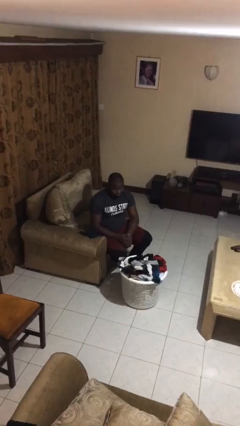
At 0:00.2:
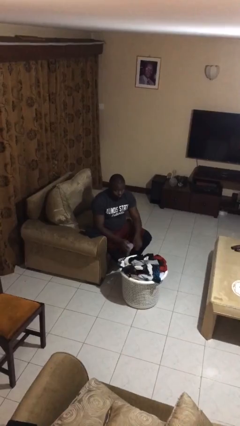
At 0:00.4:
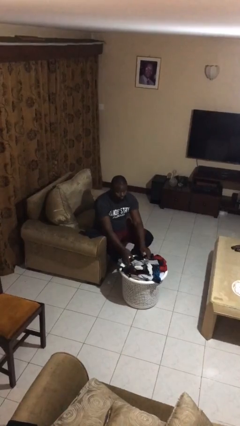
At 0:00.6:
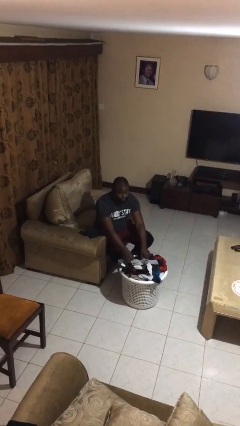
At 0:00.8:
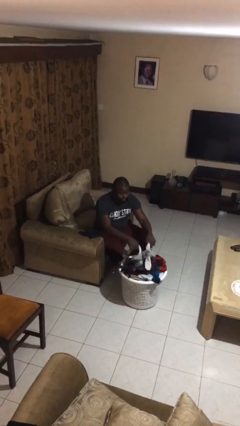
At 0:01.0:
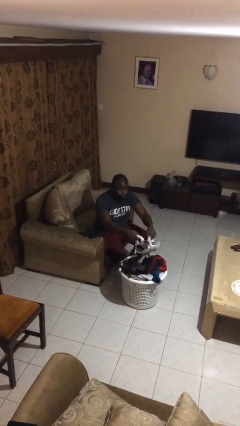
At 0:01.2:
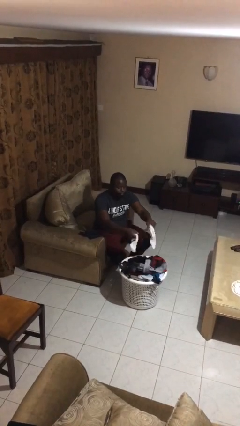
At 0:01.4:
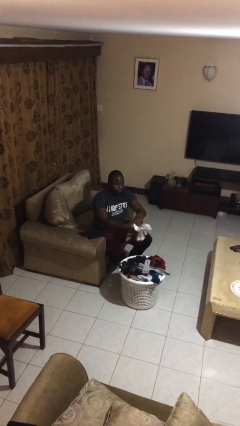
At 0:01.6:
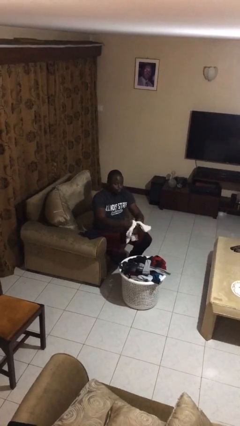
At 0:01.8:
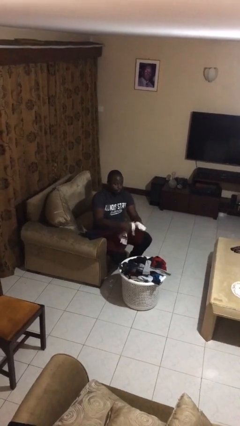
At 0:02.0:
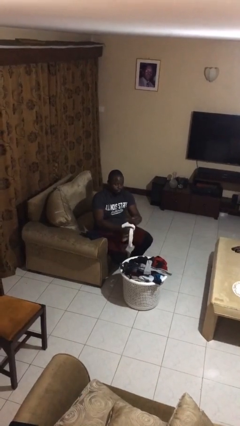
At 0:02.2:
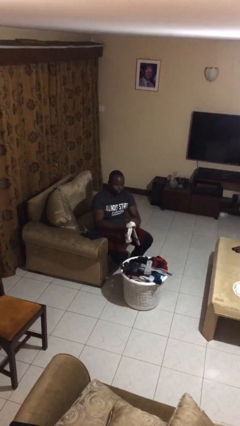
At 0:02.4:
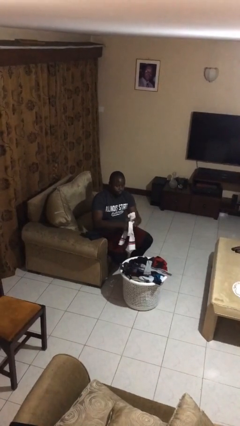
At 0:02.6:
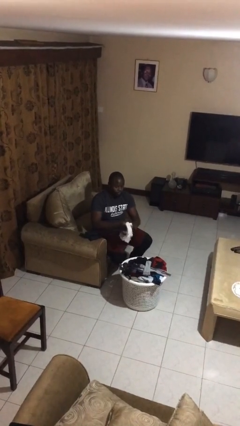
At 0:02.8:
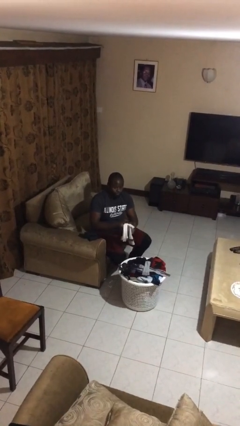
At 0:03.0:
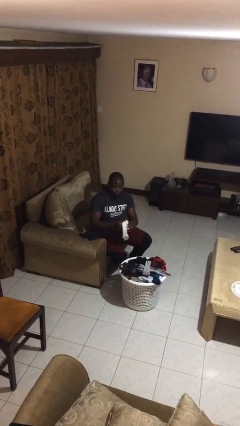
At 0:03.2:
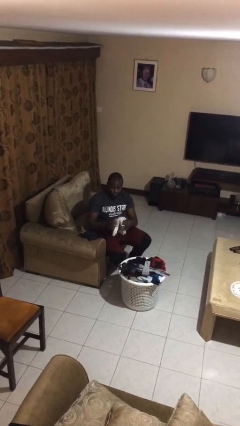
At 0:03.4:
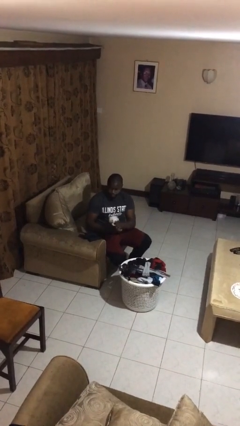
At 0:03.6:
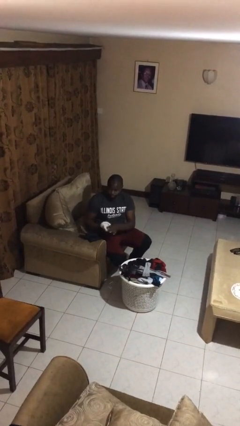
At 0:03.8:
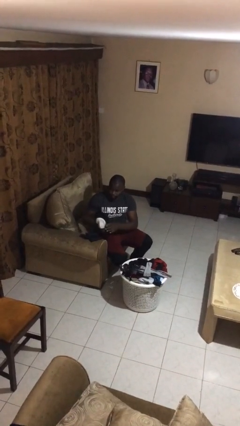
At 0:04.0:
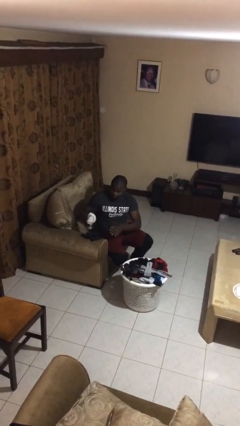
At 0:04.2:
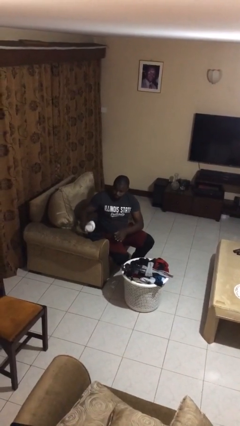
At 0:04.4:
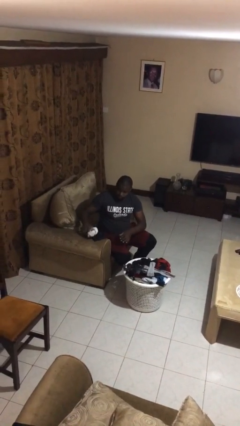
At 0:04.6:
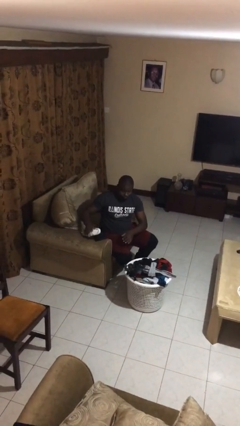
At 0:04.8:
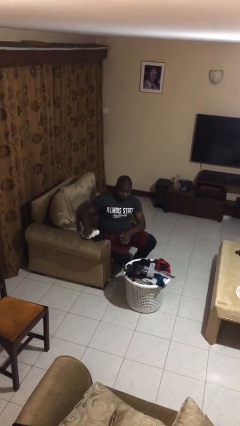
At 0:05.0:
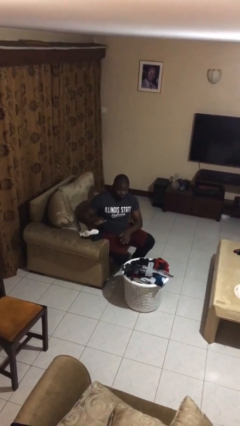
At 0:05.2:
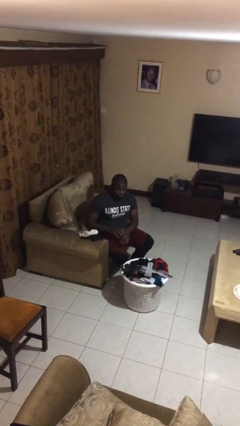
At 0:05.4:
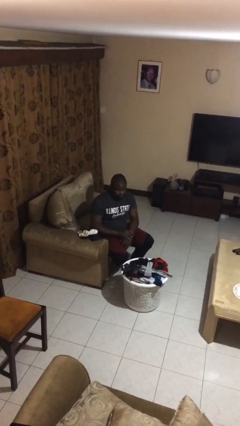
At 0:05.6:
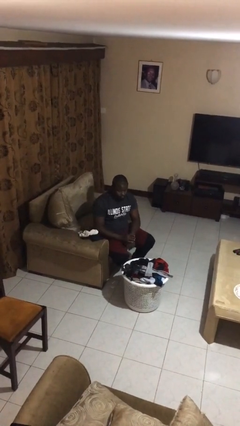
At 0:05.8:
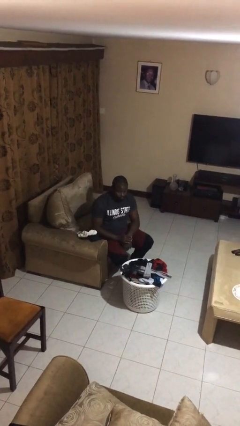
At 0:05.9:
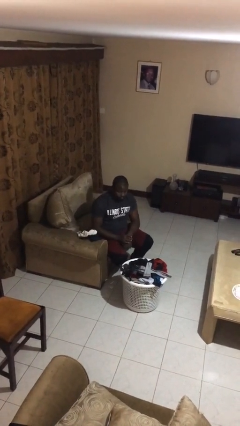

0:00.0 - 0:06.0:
person folds socks

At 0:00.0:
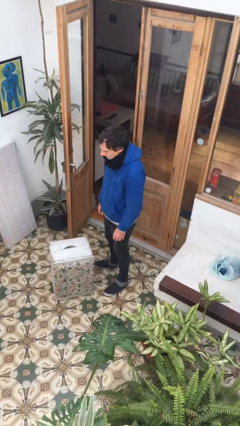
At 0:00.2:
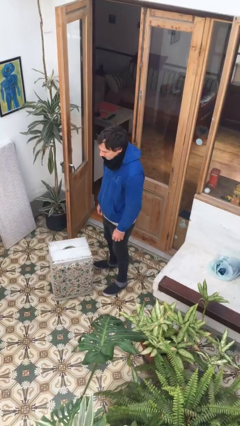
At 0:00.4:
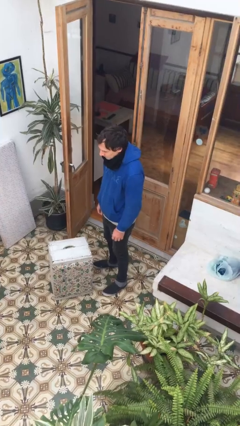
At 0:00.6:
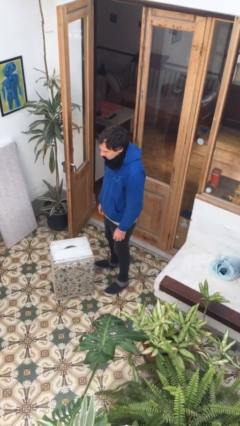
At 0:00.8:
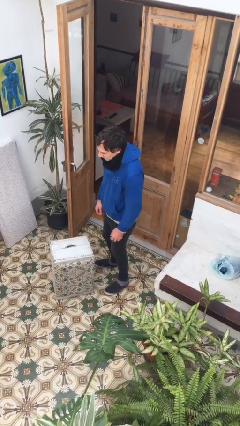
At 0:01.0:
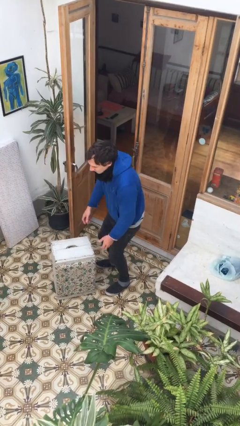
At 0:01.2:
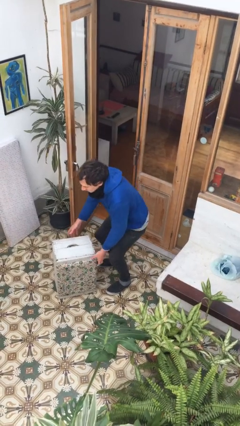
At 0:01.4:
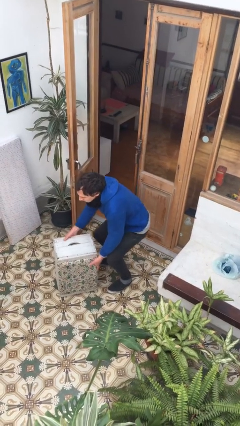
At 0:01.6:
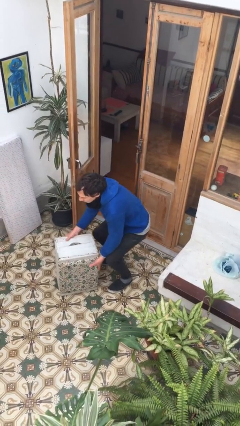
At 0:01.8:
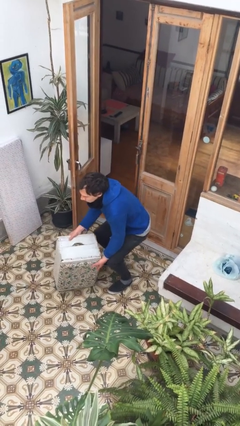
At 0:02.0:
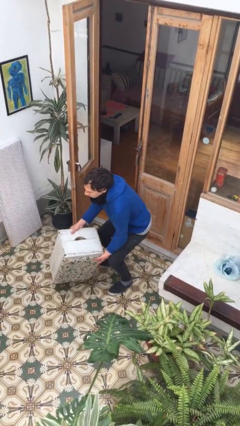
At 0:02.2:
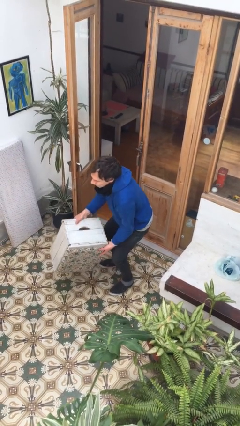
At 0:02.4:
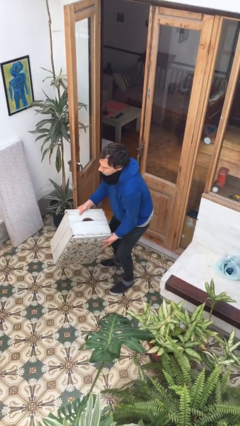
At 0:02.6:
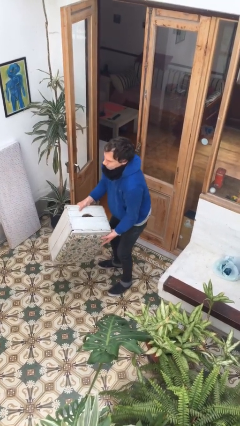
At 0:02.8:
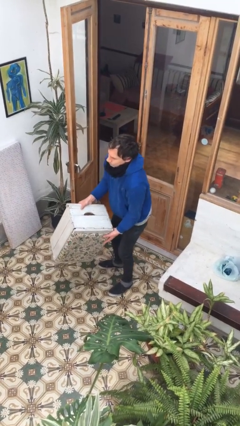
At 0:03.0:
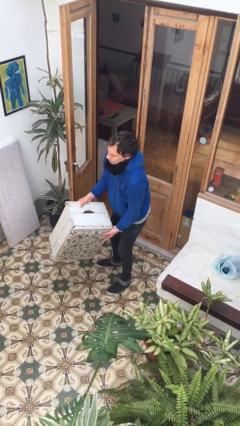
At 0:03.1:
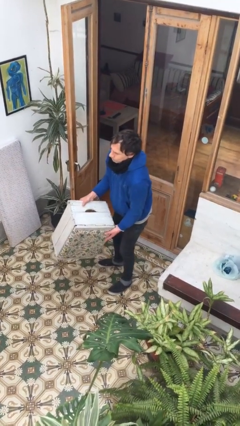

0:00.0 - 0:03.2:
person picks up object from floor

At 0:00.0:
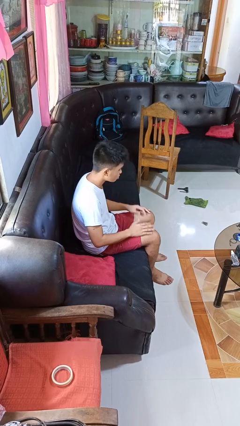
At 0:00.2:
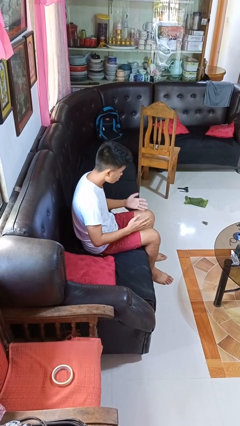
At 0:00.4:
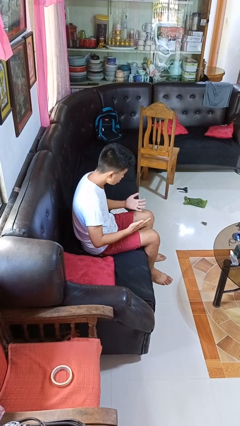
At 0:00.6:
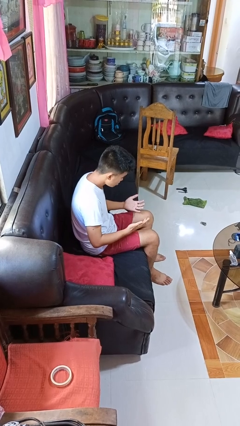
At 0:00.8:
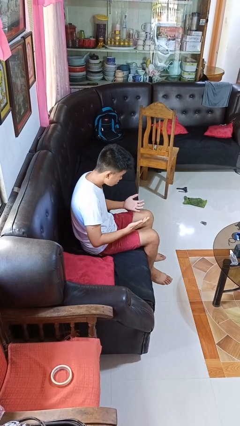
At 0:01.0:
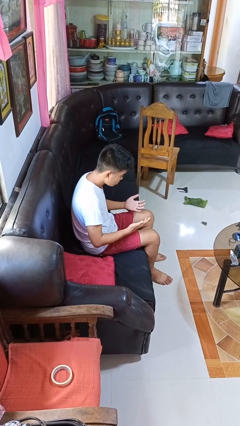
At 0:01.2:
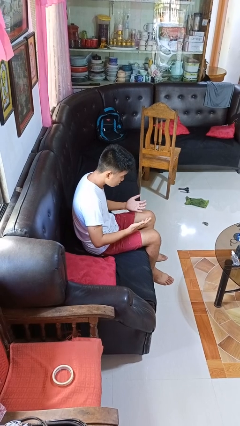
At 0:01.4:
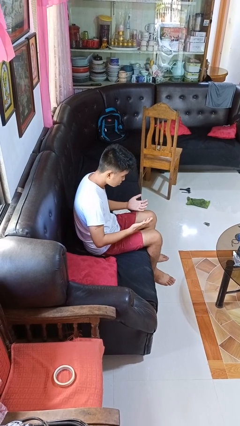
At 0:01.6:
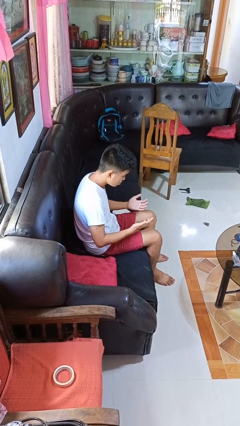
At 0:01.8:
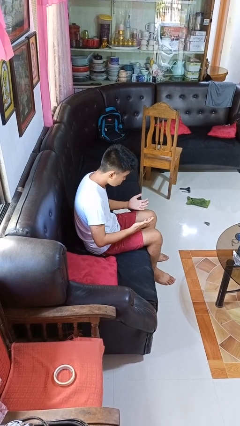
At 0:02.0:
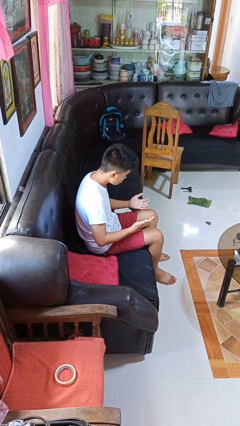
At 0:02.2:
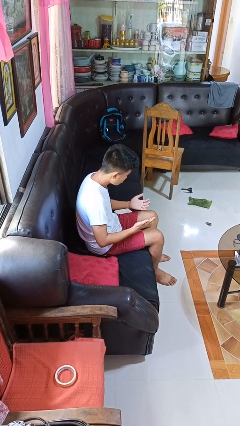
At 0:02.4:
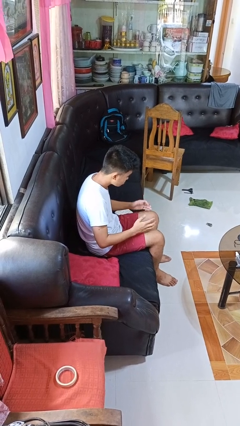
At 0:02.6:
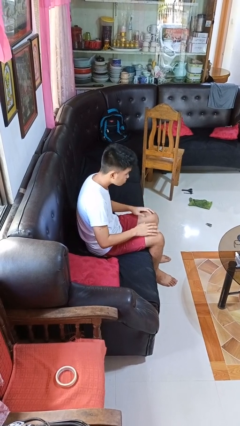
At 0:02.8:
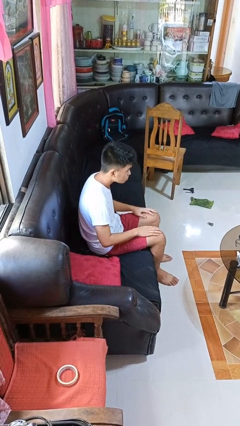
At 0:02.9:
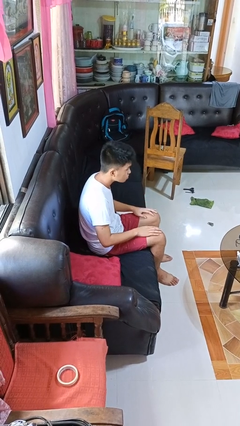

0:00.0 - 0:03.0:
person looks at hands in lap

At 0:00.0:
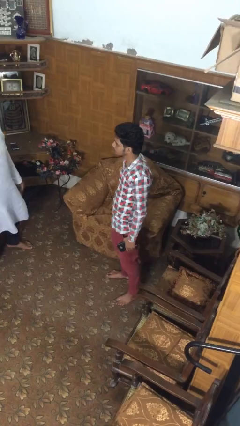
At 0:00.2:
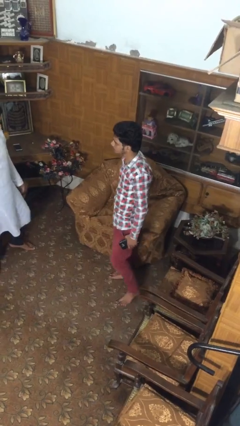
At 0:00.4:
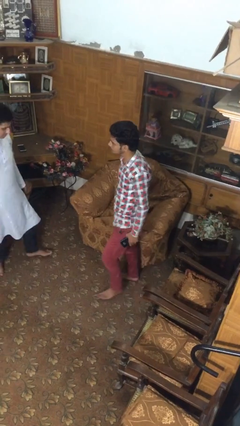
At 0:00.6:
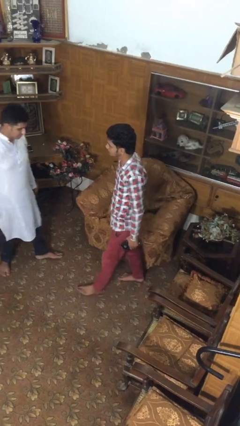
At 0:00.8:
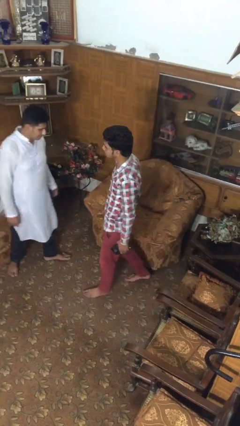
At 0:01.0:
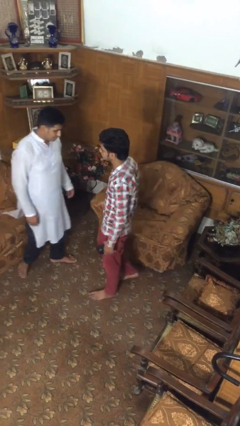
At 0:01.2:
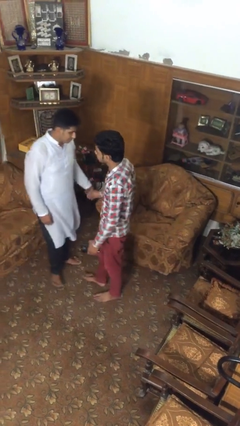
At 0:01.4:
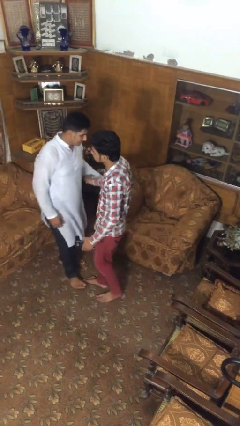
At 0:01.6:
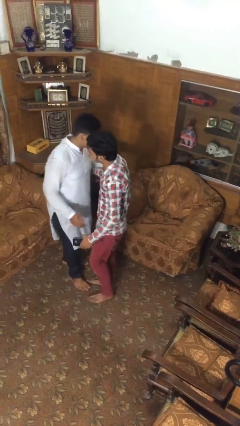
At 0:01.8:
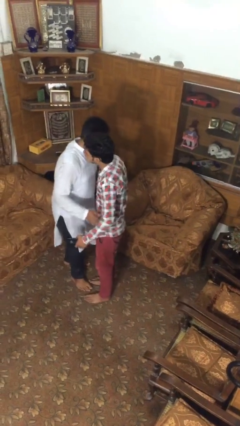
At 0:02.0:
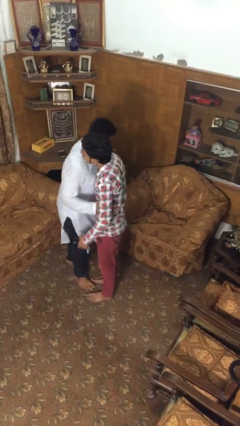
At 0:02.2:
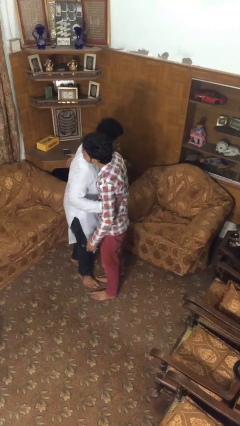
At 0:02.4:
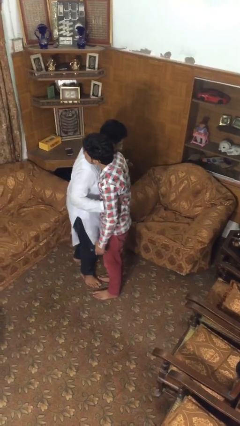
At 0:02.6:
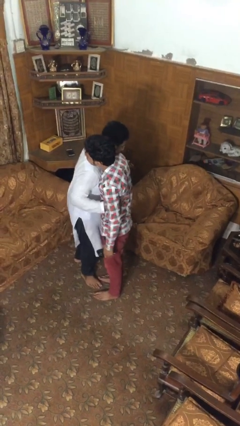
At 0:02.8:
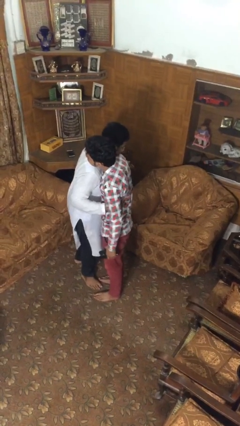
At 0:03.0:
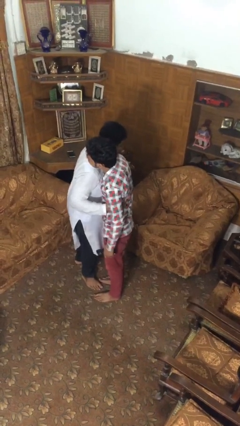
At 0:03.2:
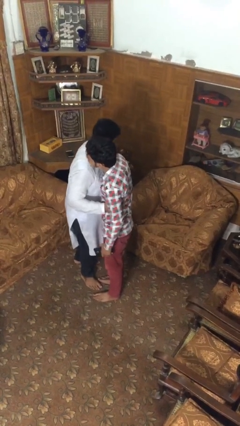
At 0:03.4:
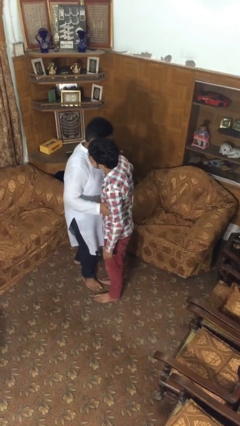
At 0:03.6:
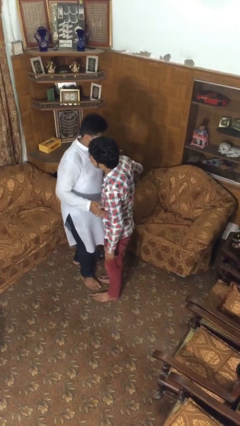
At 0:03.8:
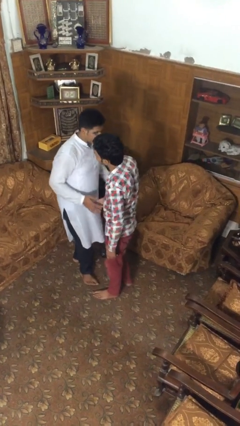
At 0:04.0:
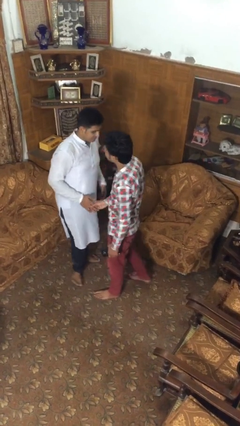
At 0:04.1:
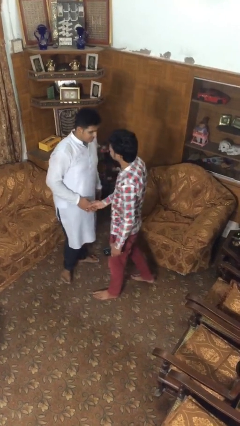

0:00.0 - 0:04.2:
person embraces person

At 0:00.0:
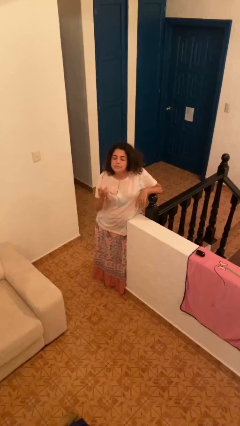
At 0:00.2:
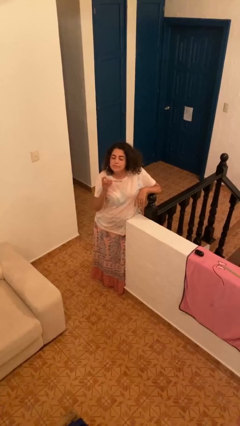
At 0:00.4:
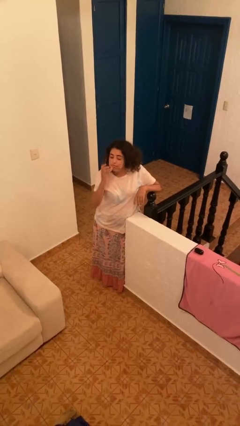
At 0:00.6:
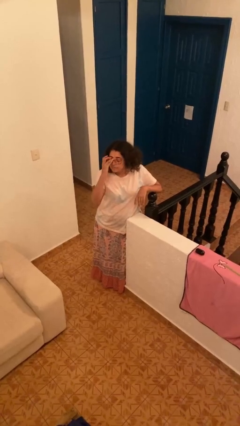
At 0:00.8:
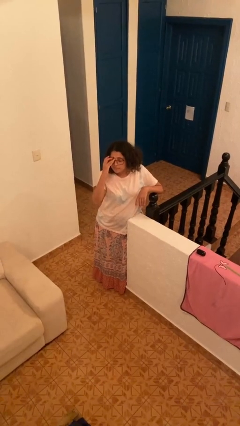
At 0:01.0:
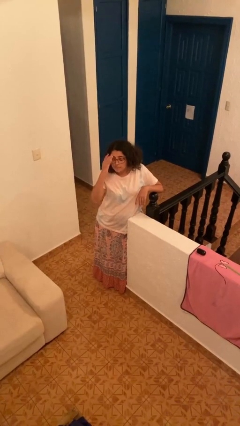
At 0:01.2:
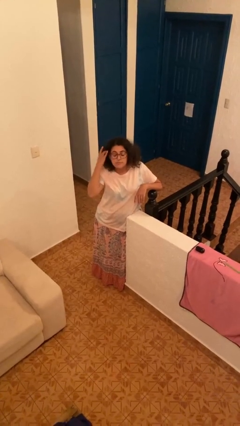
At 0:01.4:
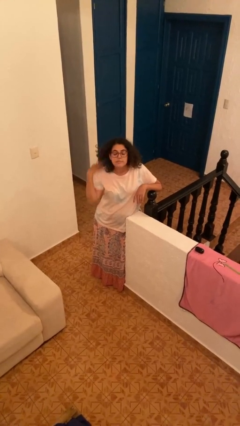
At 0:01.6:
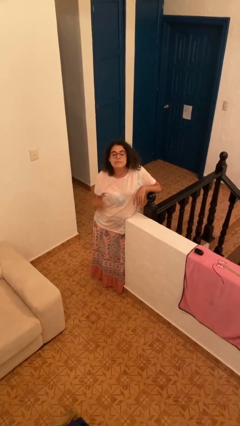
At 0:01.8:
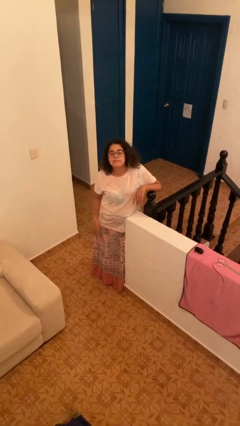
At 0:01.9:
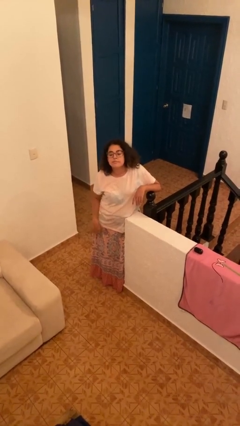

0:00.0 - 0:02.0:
person puts on glasses
